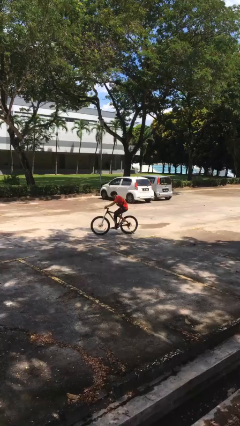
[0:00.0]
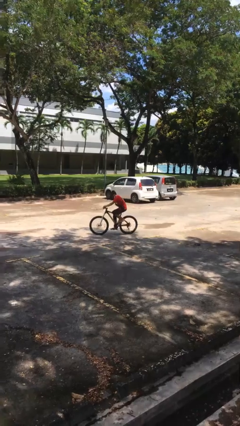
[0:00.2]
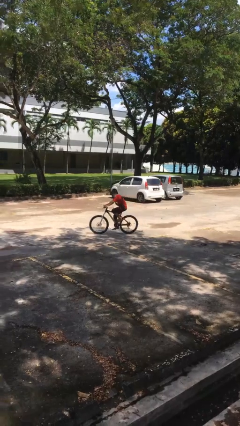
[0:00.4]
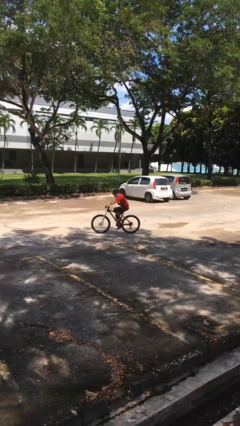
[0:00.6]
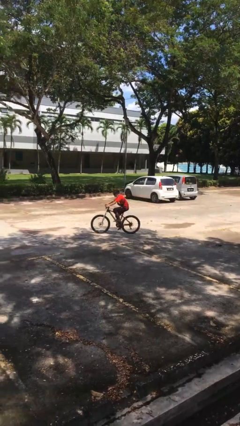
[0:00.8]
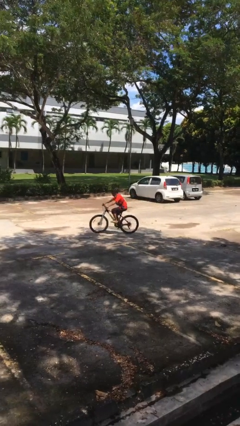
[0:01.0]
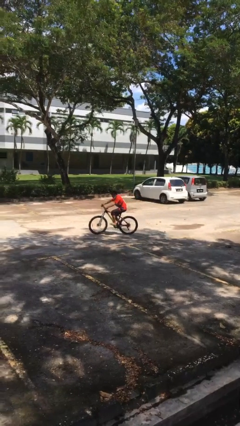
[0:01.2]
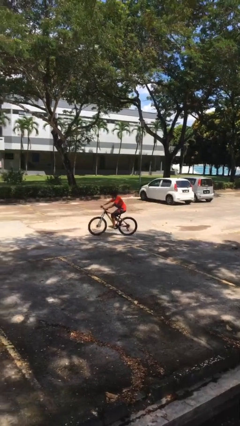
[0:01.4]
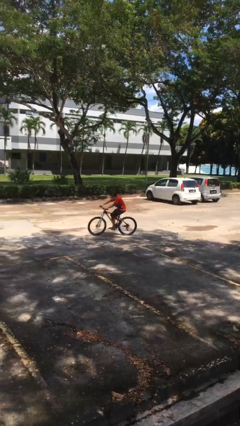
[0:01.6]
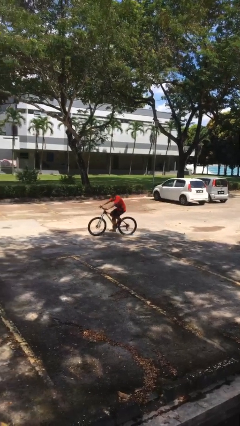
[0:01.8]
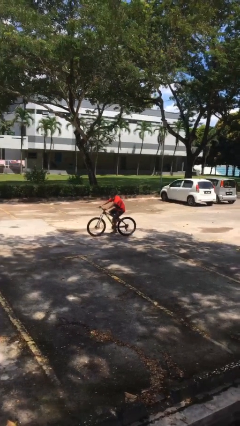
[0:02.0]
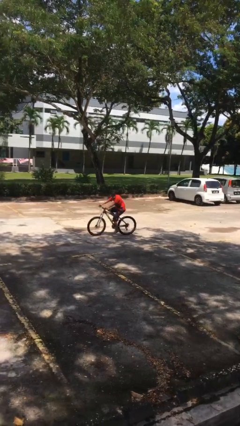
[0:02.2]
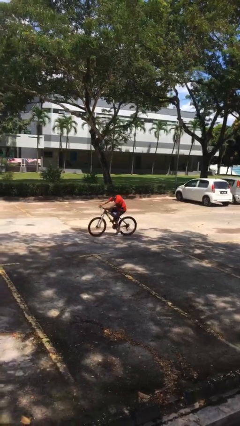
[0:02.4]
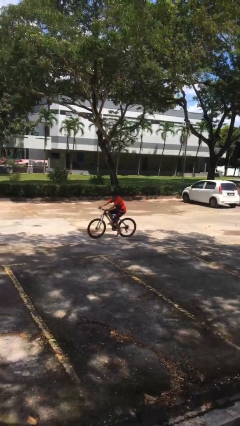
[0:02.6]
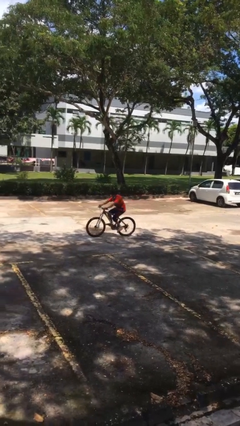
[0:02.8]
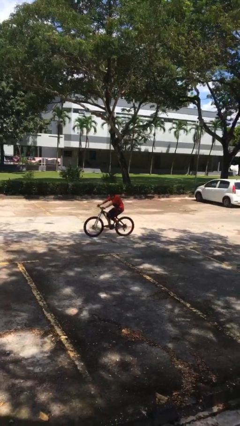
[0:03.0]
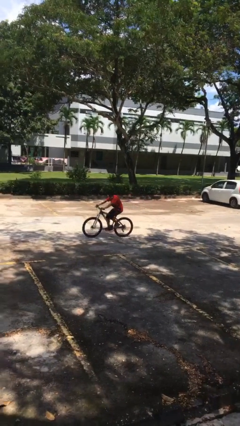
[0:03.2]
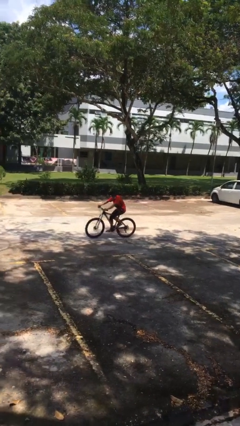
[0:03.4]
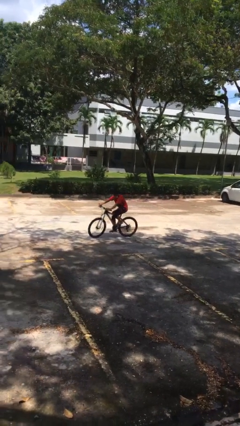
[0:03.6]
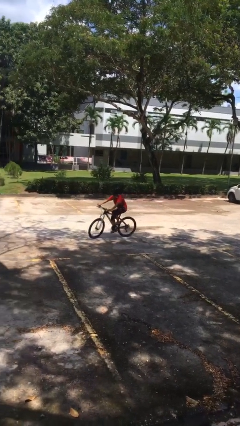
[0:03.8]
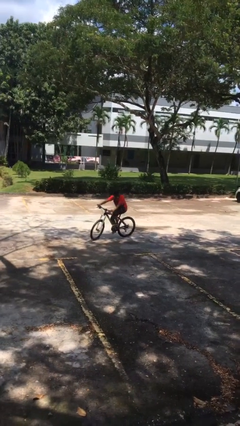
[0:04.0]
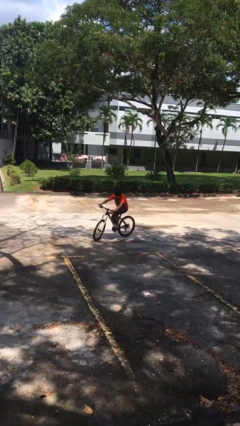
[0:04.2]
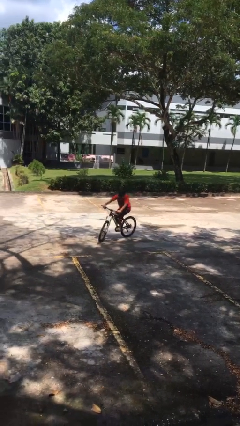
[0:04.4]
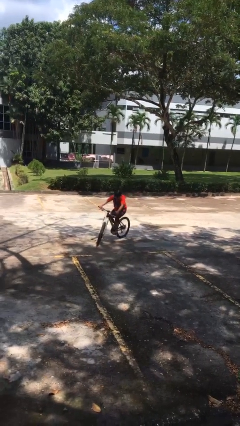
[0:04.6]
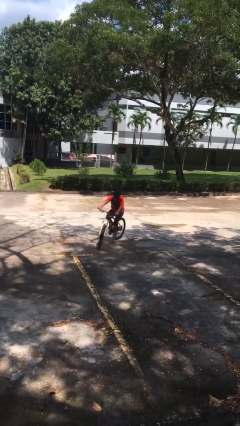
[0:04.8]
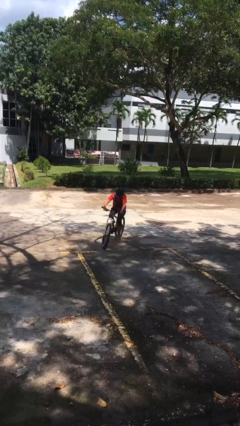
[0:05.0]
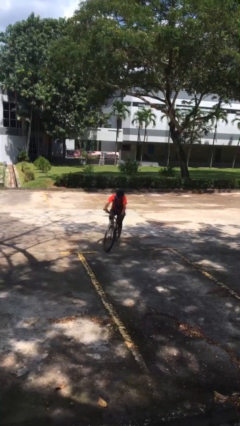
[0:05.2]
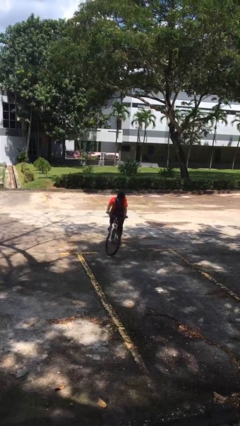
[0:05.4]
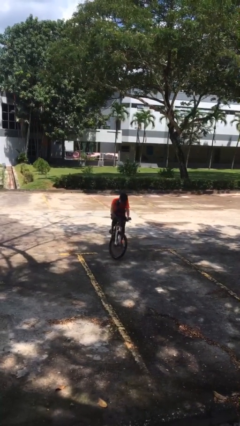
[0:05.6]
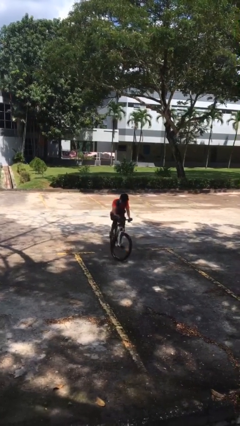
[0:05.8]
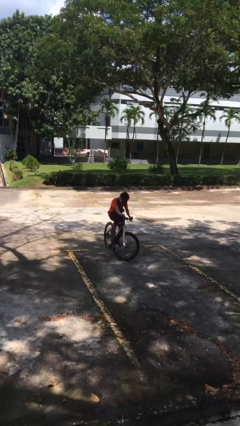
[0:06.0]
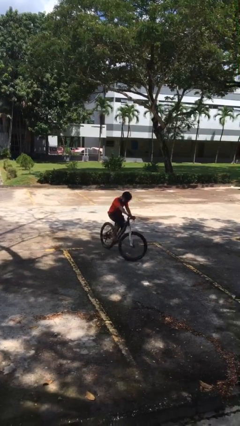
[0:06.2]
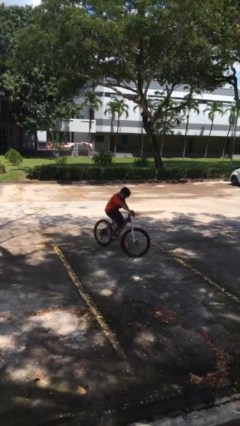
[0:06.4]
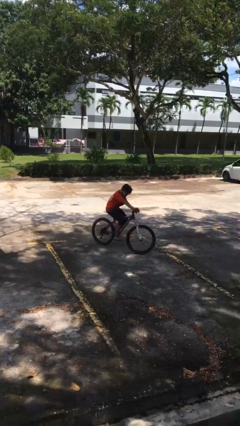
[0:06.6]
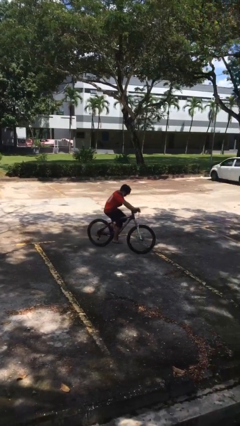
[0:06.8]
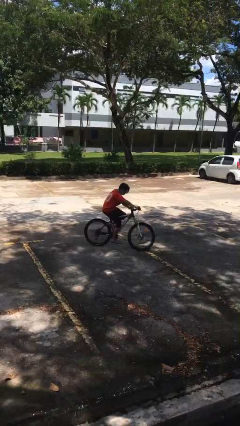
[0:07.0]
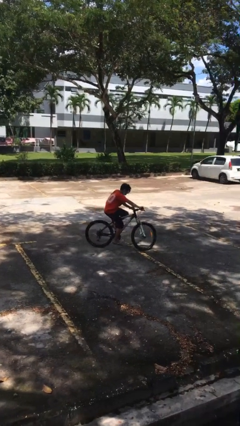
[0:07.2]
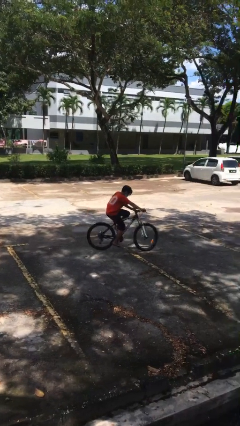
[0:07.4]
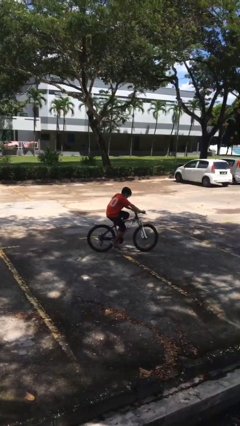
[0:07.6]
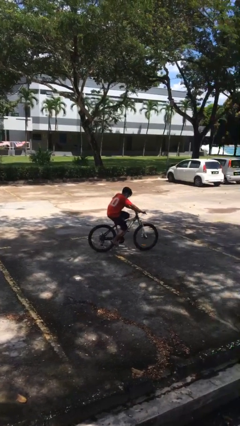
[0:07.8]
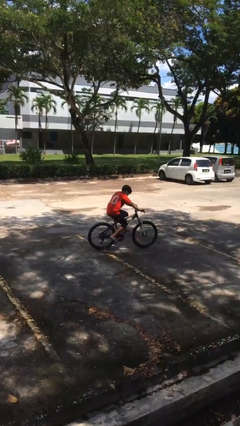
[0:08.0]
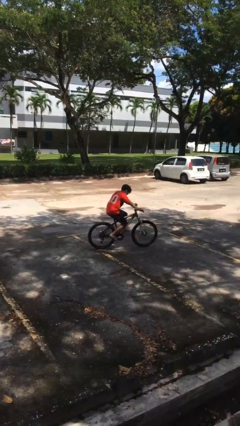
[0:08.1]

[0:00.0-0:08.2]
person rides bicycle

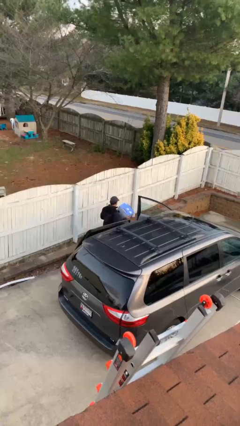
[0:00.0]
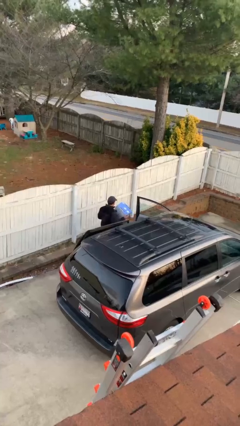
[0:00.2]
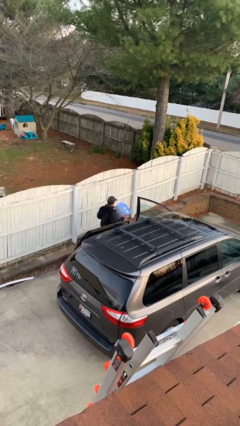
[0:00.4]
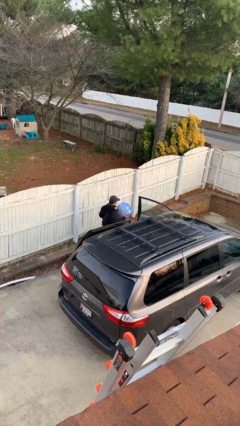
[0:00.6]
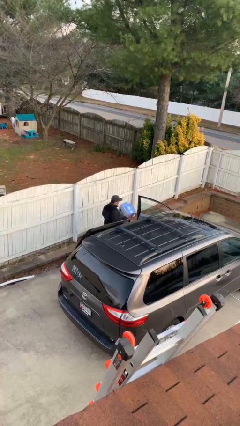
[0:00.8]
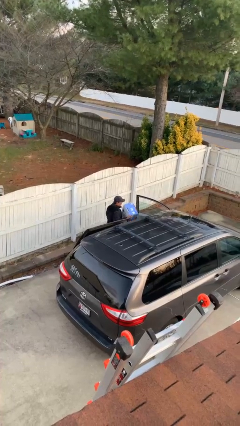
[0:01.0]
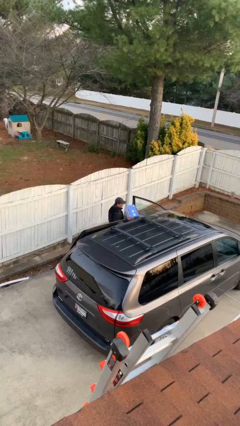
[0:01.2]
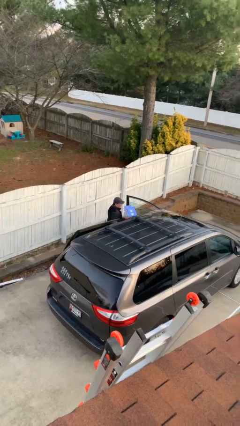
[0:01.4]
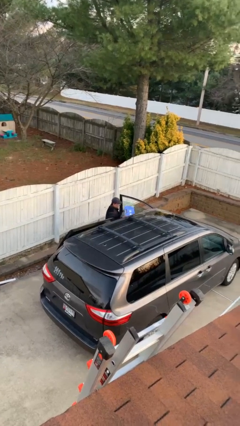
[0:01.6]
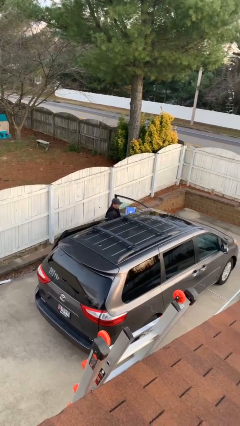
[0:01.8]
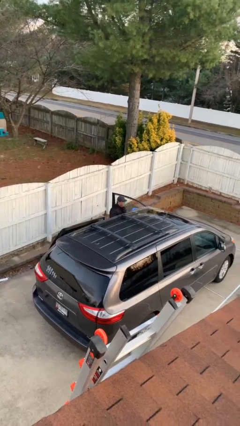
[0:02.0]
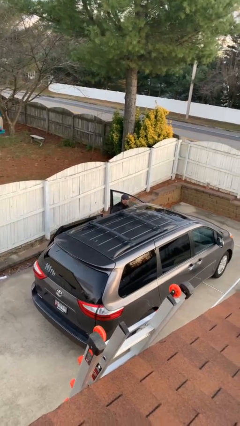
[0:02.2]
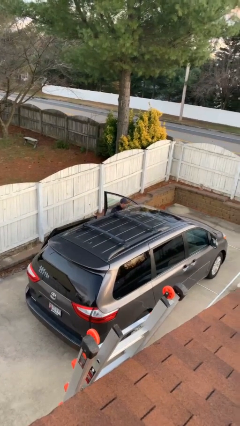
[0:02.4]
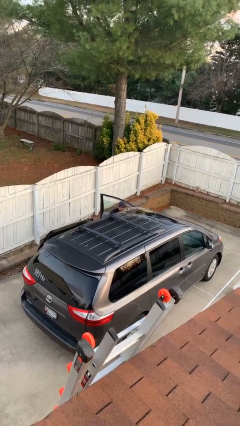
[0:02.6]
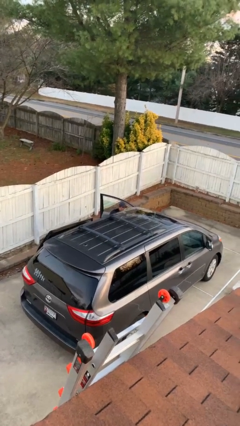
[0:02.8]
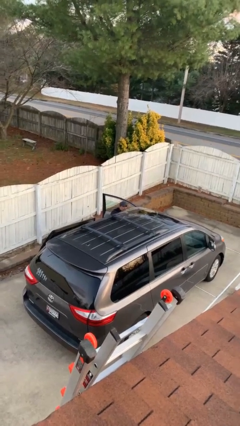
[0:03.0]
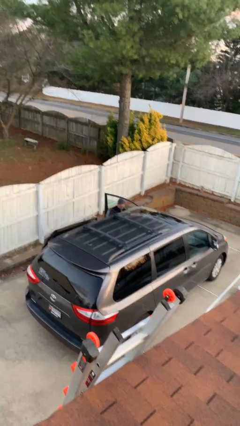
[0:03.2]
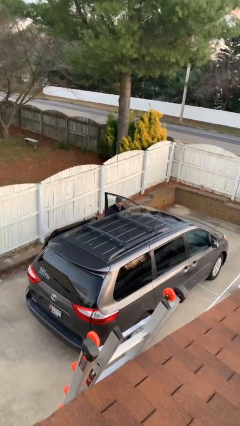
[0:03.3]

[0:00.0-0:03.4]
person loads car

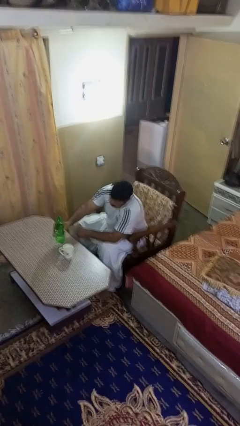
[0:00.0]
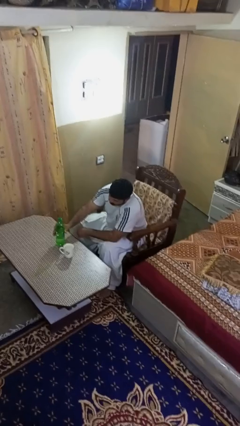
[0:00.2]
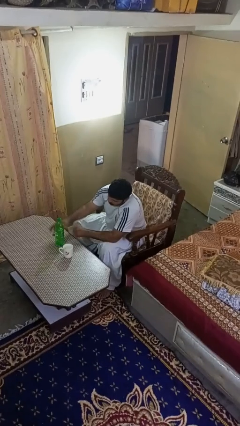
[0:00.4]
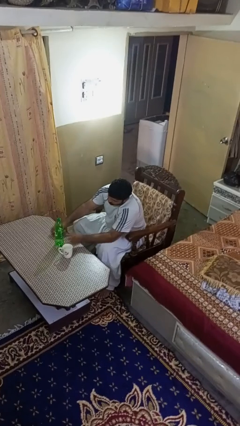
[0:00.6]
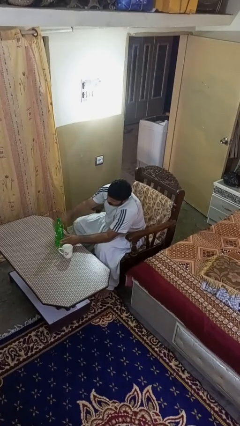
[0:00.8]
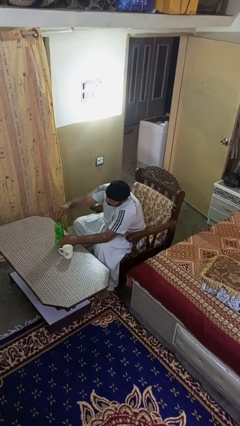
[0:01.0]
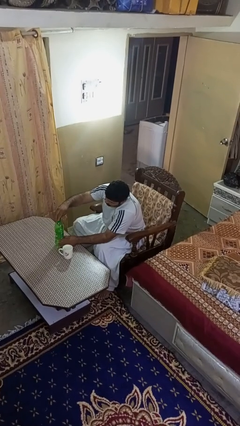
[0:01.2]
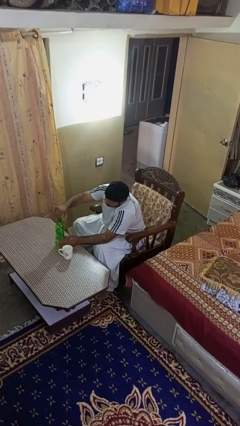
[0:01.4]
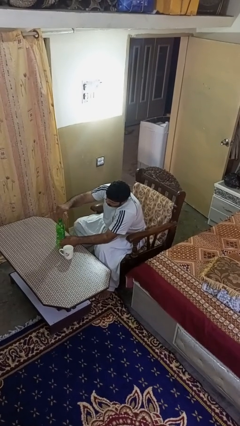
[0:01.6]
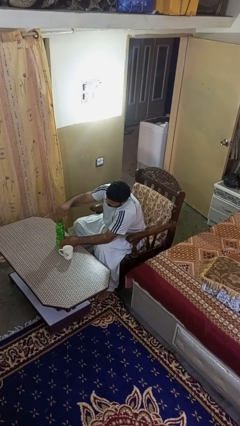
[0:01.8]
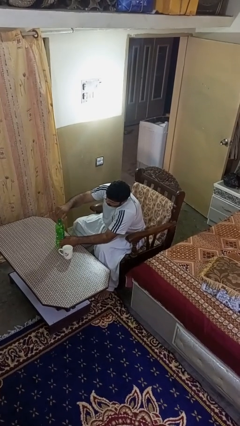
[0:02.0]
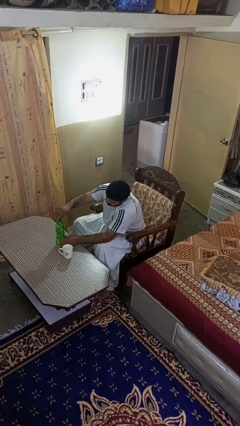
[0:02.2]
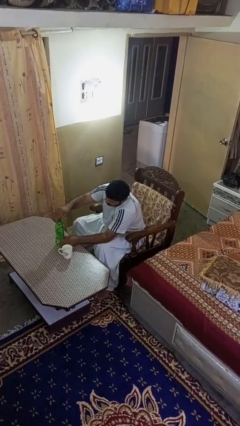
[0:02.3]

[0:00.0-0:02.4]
person screws lid to bottle

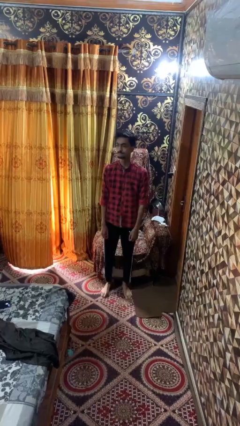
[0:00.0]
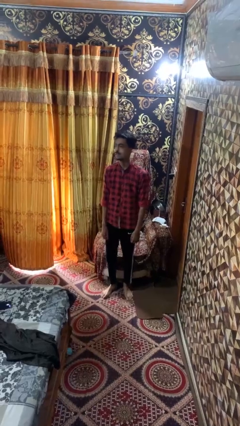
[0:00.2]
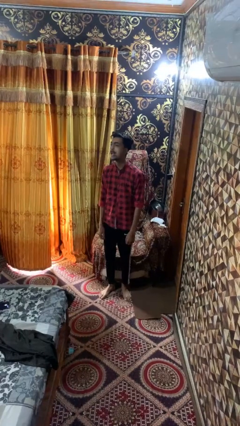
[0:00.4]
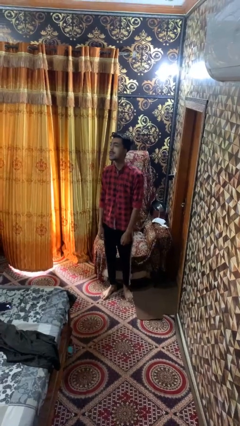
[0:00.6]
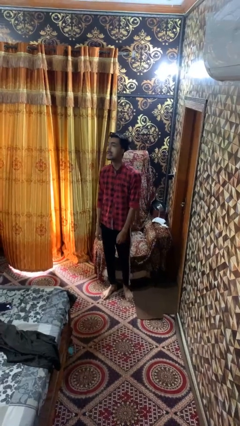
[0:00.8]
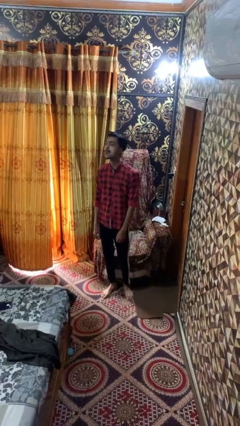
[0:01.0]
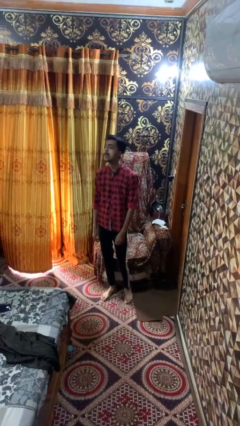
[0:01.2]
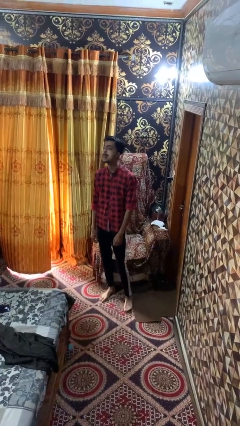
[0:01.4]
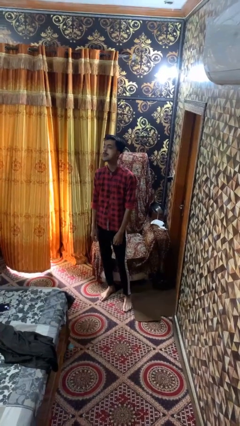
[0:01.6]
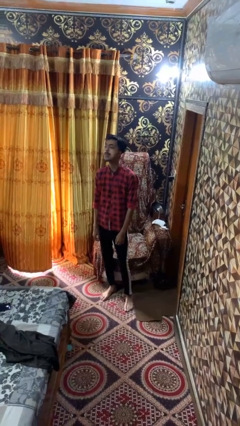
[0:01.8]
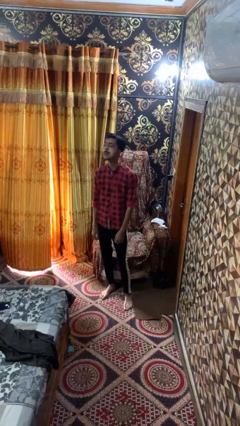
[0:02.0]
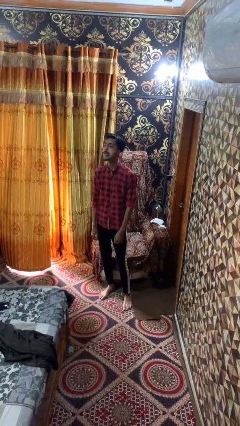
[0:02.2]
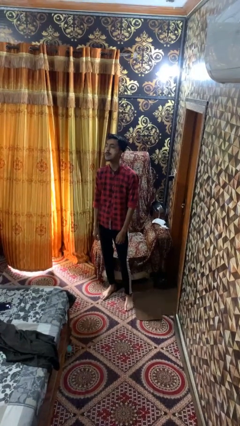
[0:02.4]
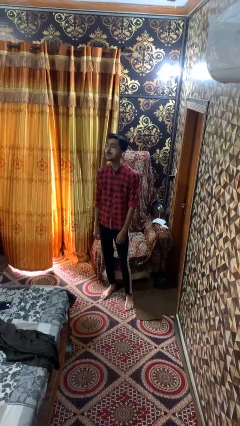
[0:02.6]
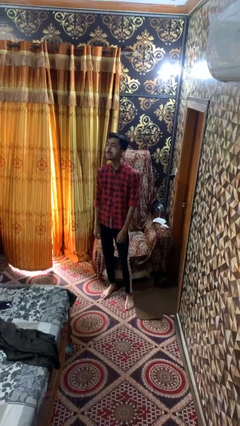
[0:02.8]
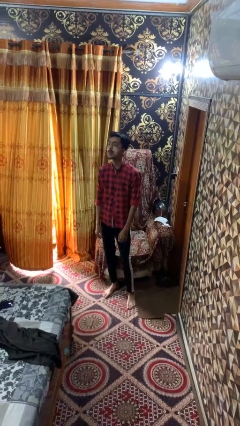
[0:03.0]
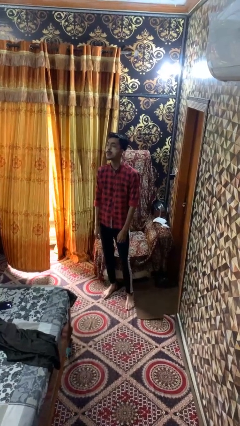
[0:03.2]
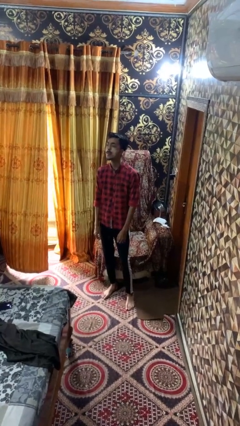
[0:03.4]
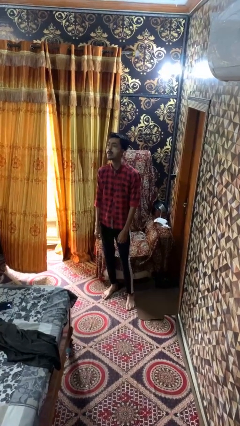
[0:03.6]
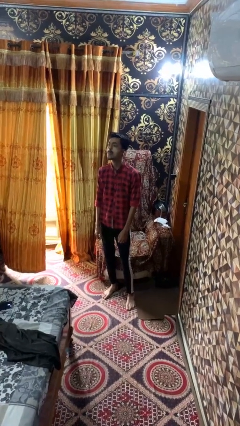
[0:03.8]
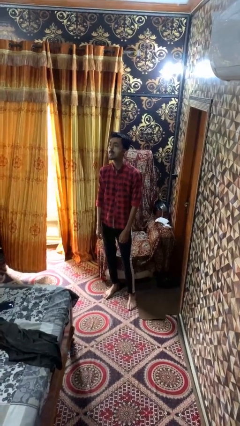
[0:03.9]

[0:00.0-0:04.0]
person sticks out tongue
